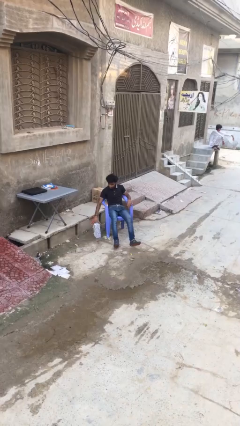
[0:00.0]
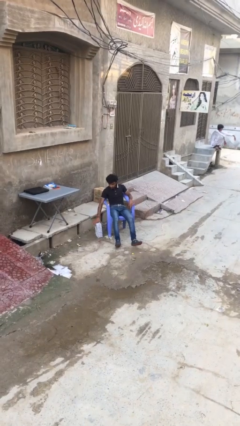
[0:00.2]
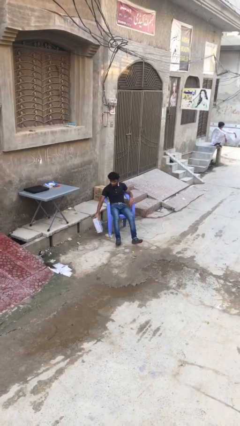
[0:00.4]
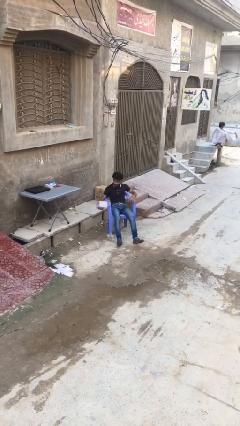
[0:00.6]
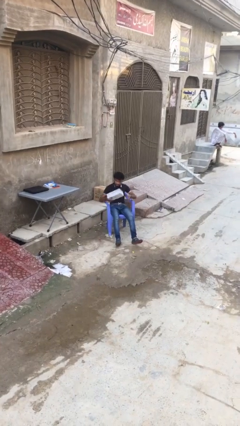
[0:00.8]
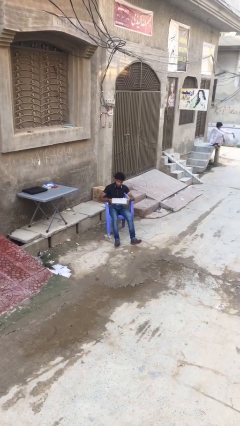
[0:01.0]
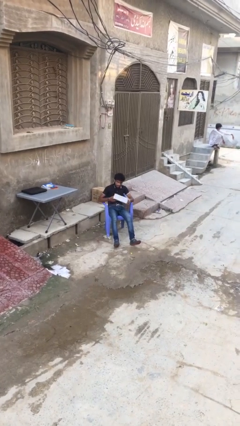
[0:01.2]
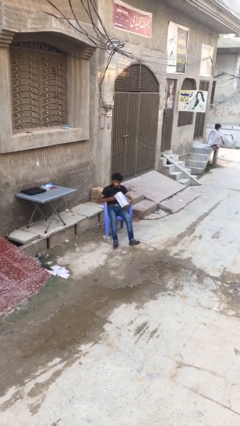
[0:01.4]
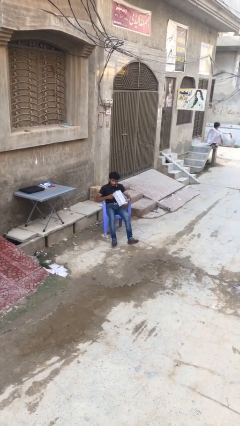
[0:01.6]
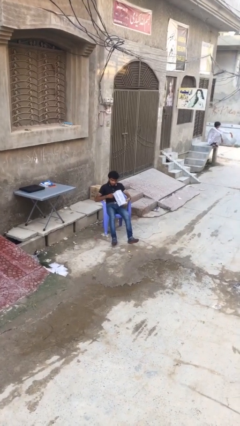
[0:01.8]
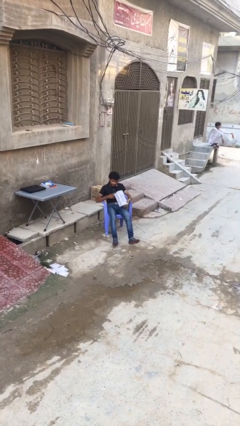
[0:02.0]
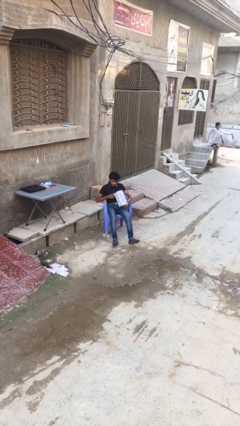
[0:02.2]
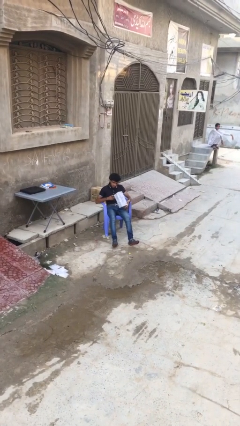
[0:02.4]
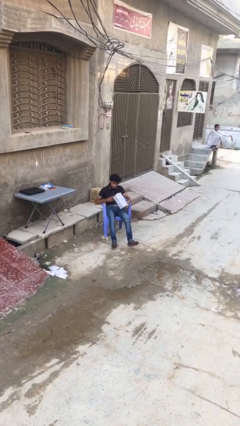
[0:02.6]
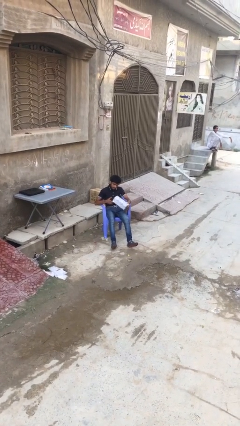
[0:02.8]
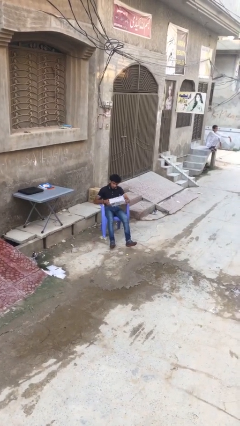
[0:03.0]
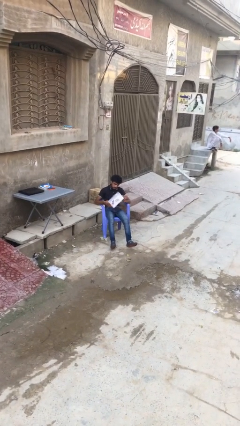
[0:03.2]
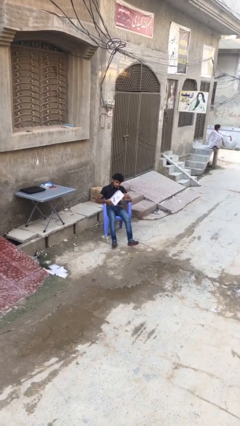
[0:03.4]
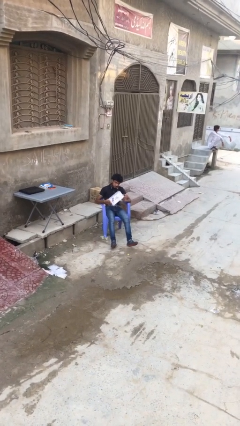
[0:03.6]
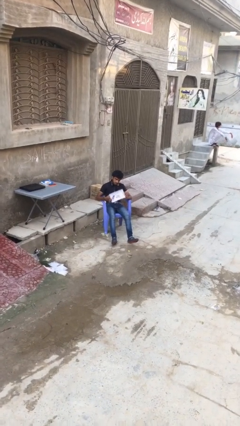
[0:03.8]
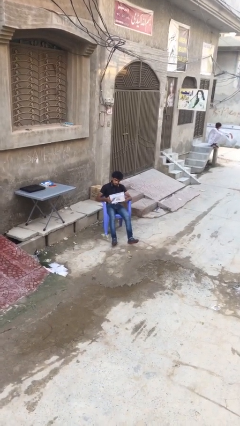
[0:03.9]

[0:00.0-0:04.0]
person picks up object from floor

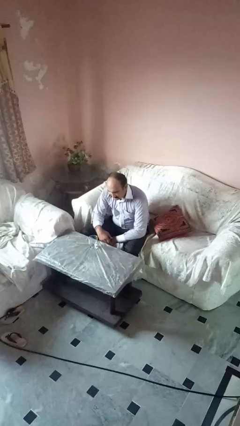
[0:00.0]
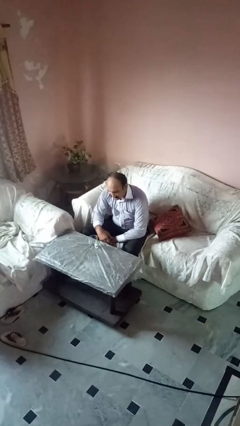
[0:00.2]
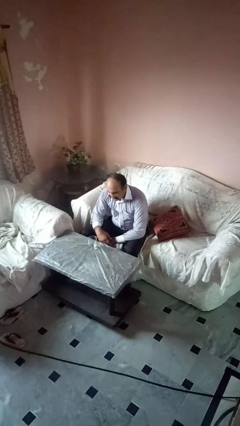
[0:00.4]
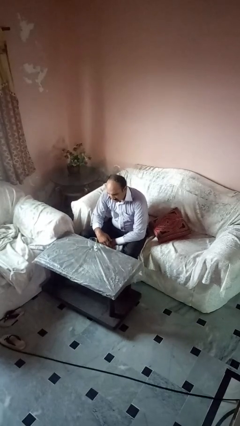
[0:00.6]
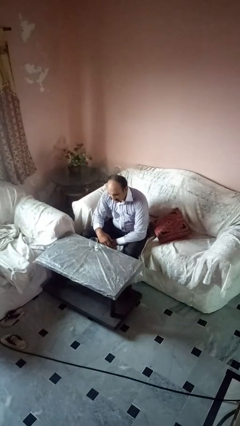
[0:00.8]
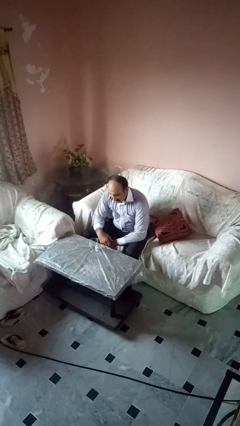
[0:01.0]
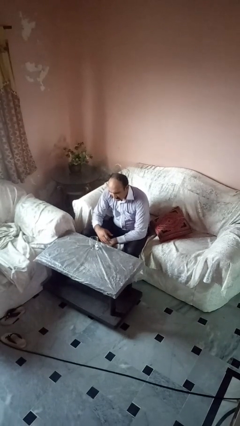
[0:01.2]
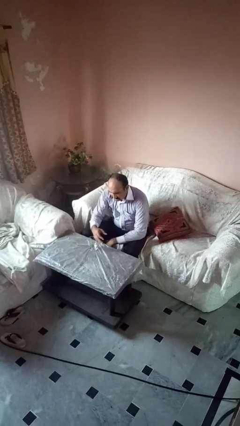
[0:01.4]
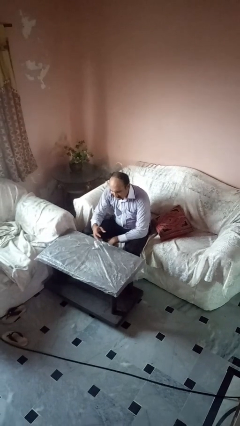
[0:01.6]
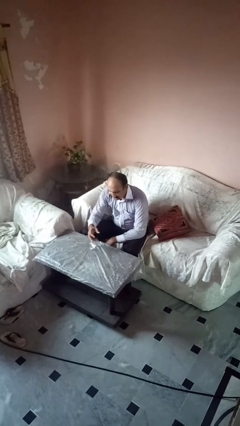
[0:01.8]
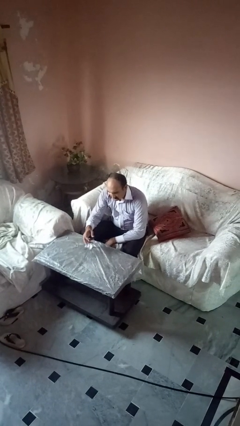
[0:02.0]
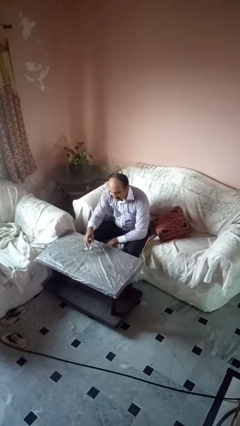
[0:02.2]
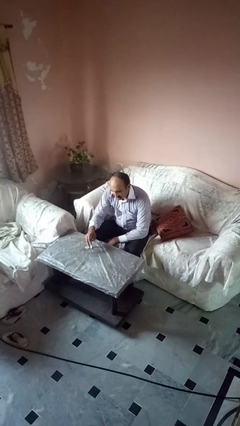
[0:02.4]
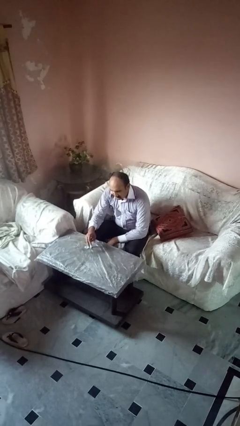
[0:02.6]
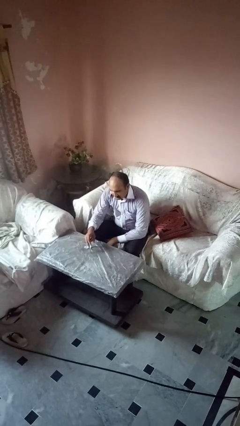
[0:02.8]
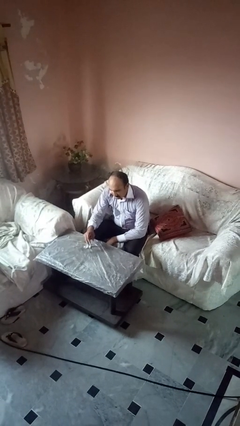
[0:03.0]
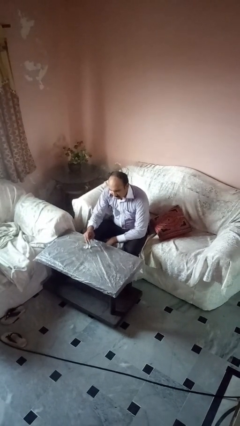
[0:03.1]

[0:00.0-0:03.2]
person spills on table

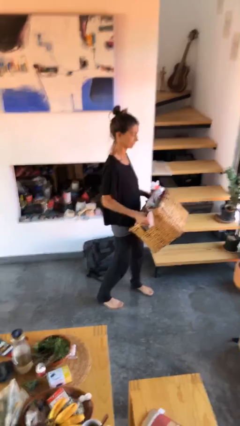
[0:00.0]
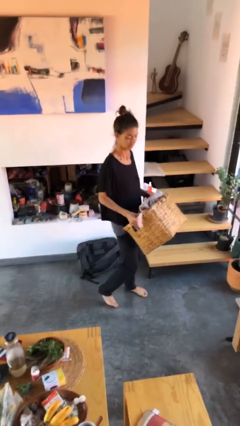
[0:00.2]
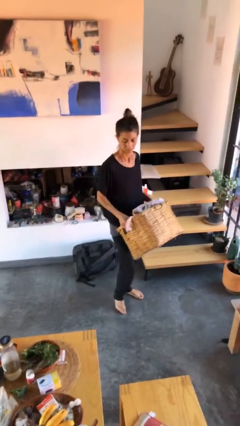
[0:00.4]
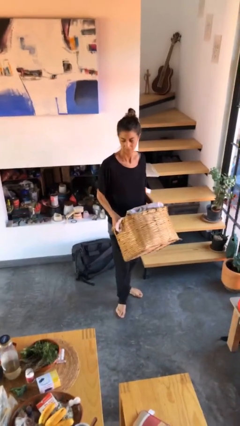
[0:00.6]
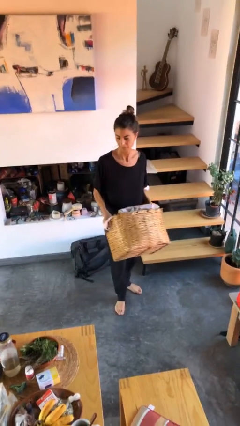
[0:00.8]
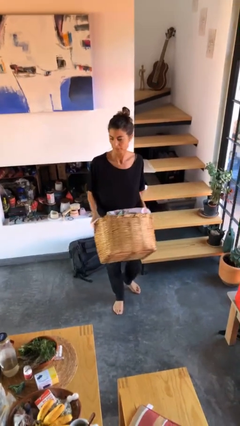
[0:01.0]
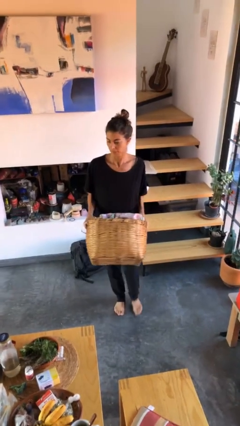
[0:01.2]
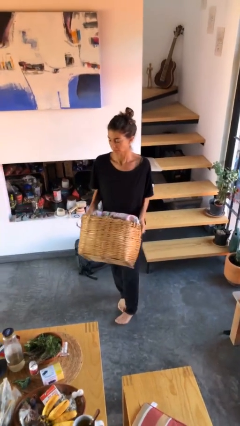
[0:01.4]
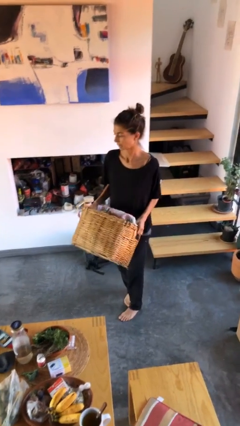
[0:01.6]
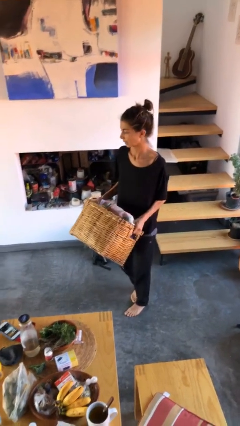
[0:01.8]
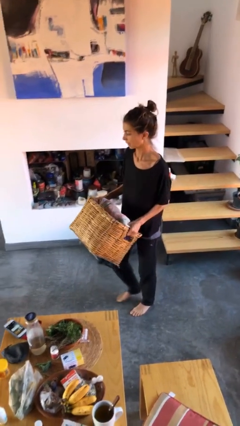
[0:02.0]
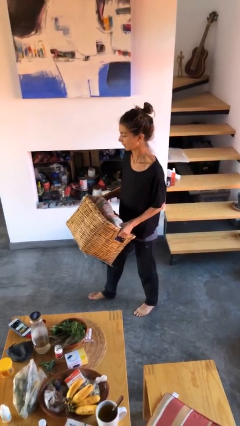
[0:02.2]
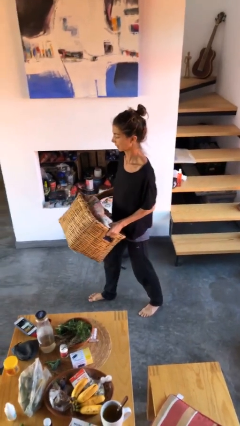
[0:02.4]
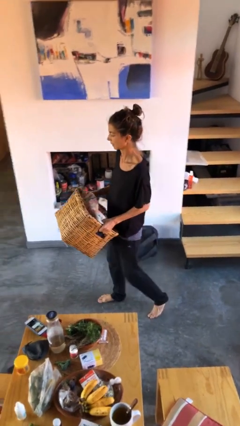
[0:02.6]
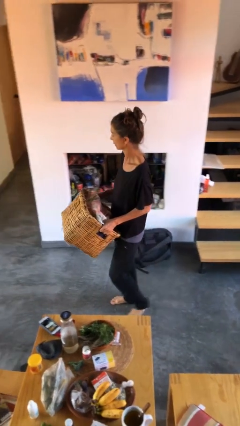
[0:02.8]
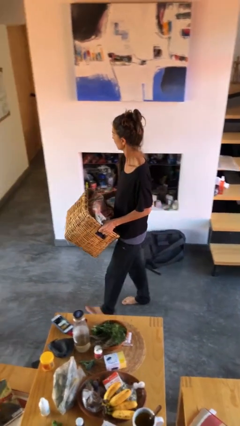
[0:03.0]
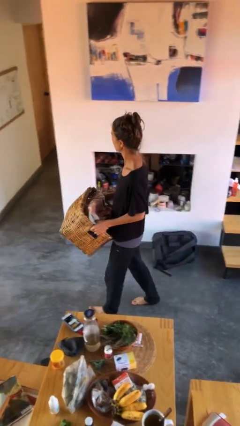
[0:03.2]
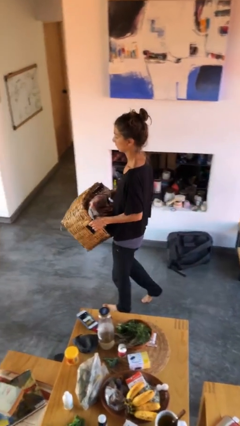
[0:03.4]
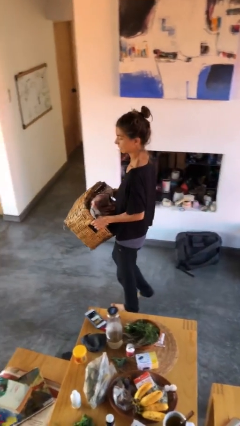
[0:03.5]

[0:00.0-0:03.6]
person carries laundry basket

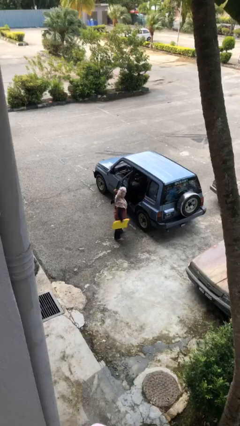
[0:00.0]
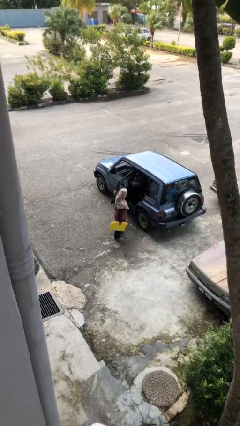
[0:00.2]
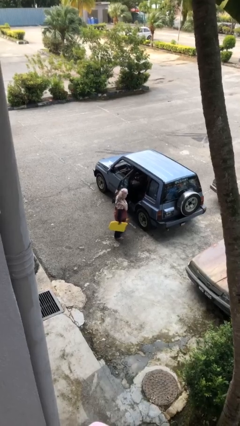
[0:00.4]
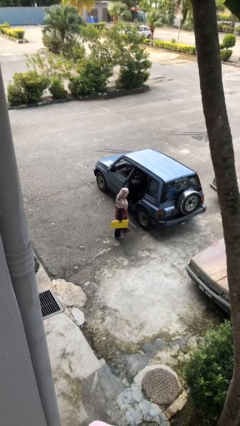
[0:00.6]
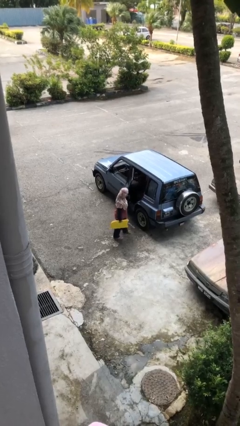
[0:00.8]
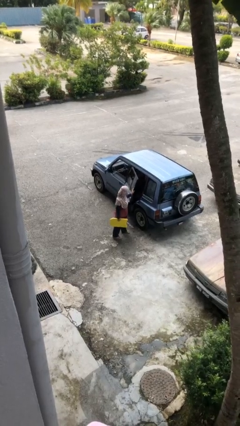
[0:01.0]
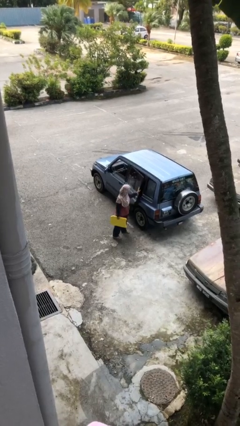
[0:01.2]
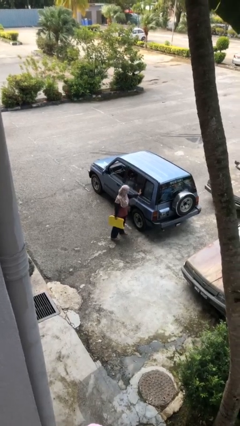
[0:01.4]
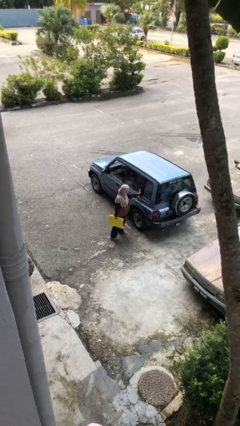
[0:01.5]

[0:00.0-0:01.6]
person closes car door

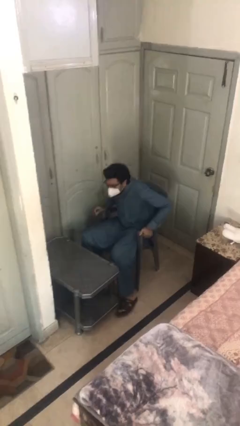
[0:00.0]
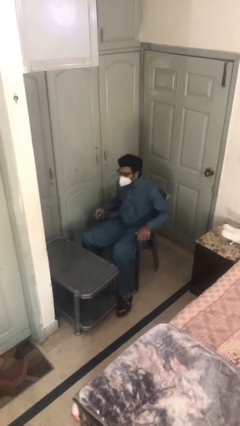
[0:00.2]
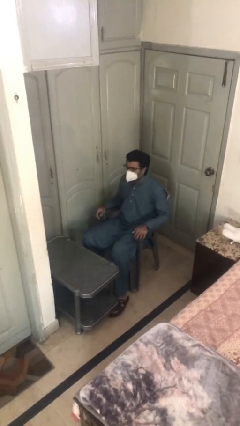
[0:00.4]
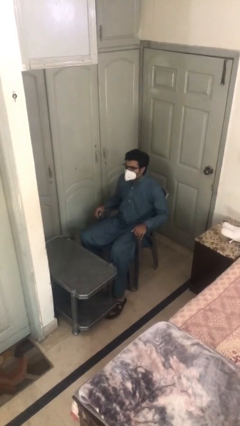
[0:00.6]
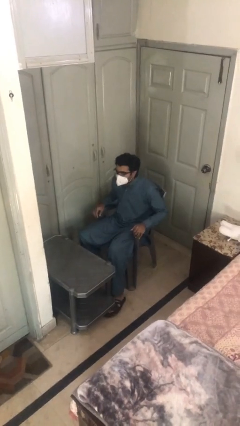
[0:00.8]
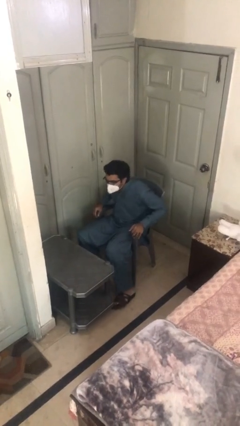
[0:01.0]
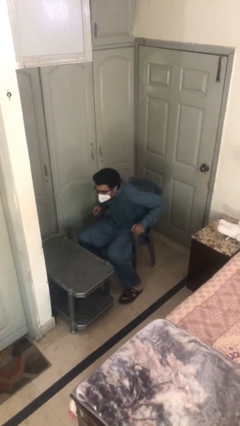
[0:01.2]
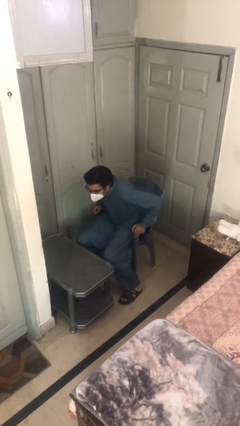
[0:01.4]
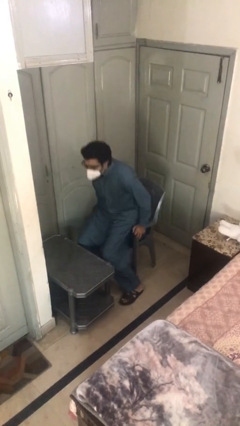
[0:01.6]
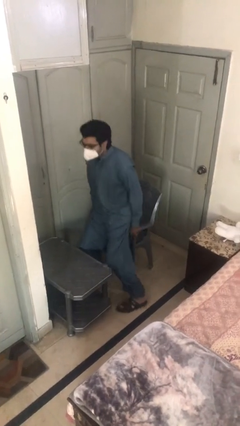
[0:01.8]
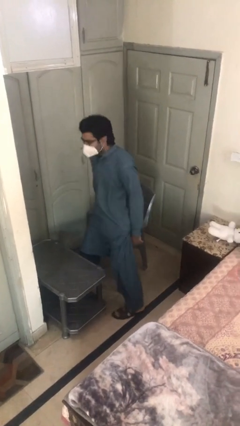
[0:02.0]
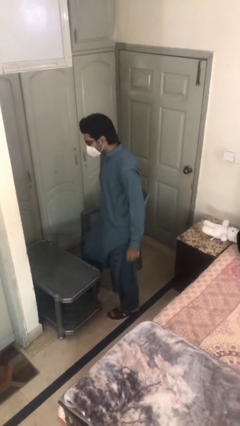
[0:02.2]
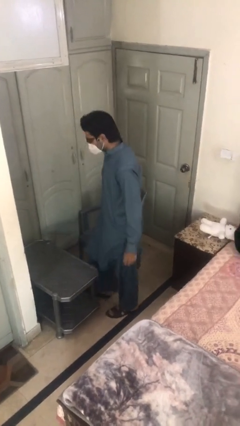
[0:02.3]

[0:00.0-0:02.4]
person stands up

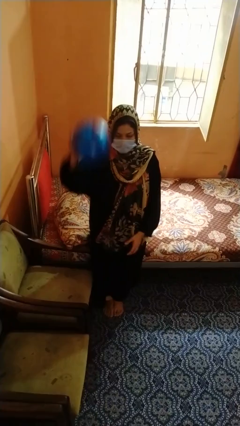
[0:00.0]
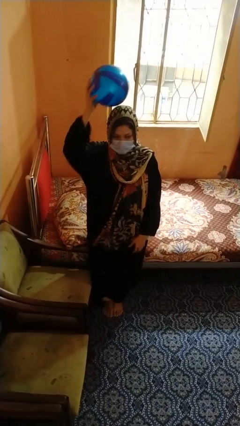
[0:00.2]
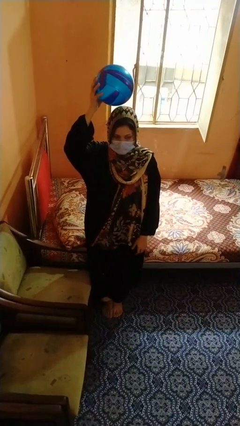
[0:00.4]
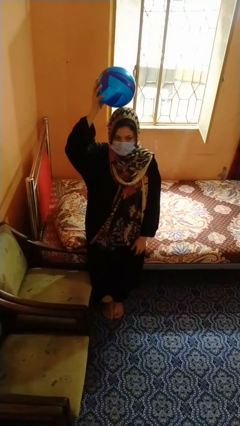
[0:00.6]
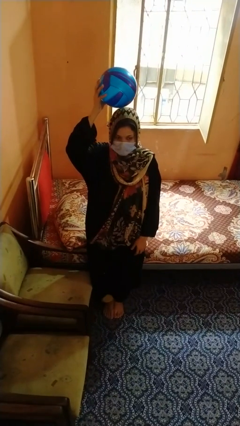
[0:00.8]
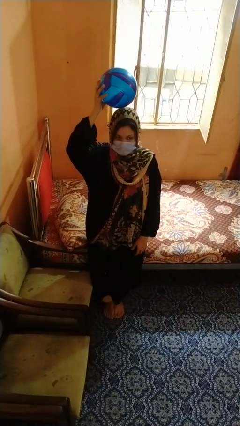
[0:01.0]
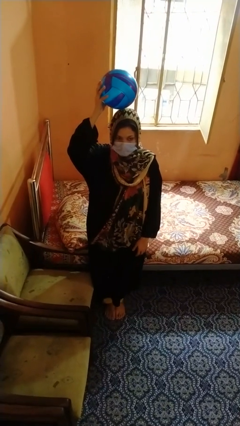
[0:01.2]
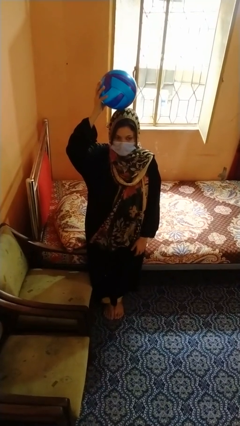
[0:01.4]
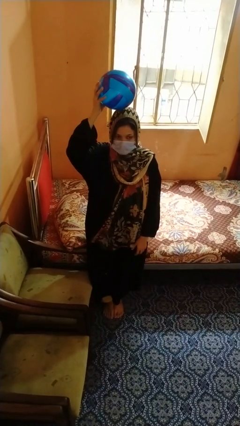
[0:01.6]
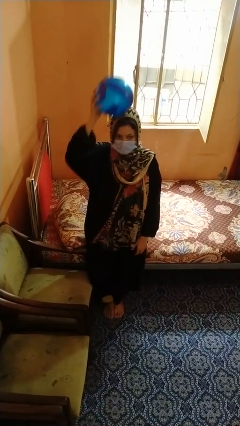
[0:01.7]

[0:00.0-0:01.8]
person holds object above head

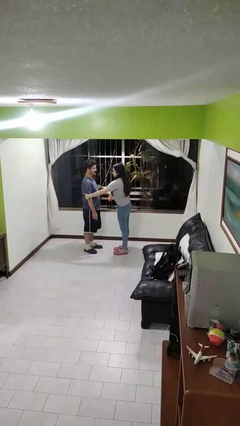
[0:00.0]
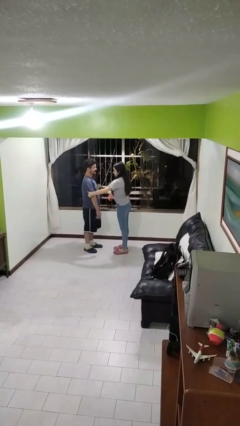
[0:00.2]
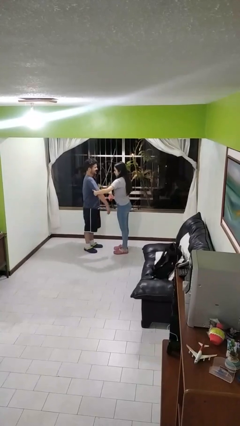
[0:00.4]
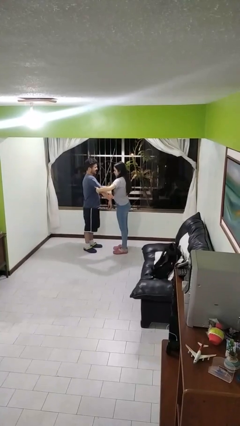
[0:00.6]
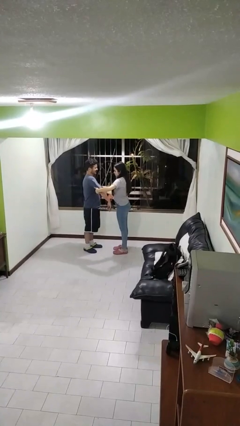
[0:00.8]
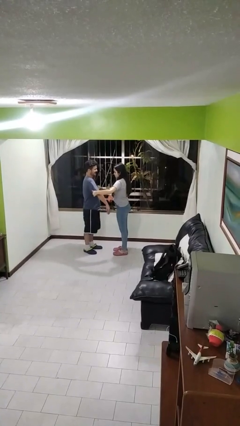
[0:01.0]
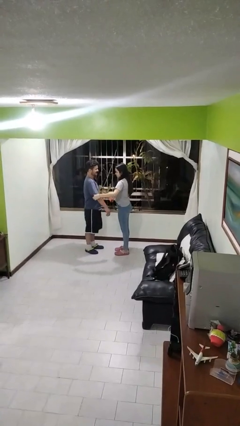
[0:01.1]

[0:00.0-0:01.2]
person grabs person by bicep
